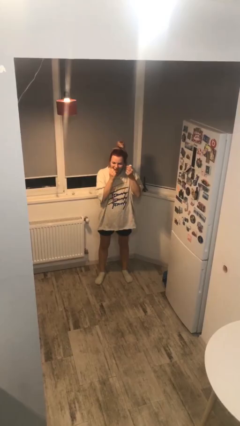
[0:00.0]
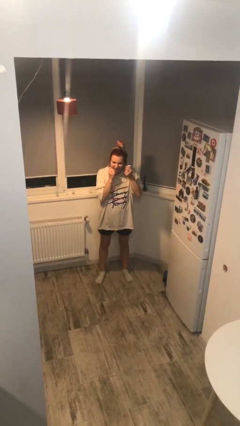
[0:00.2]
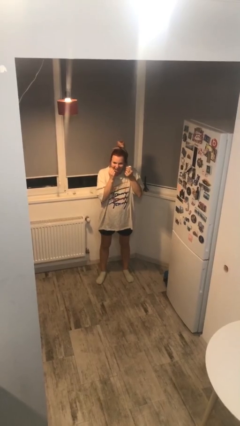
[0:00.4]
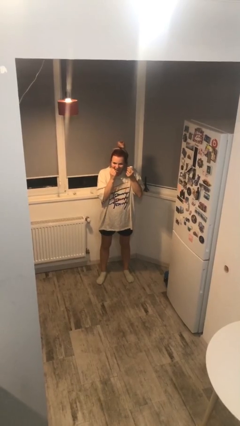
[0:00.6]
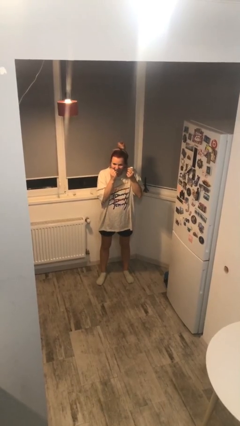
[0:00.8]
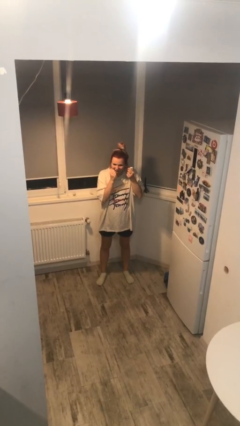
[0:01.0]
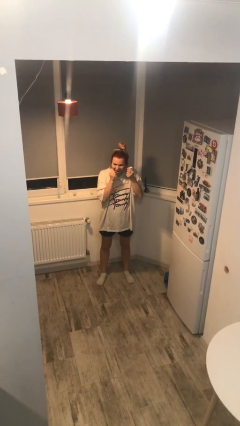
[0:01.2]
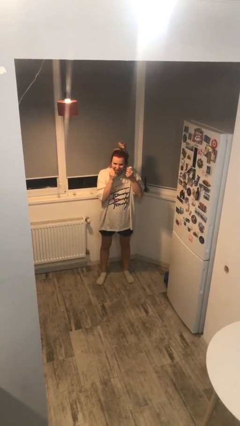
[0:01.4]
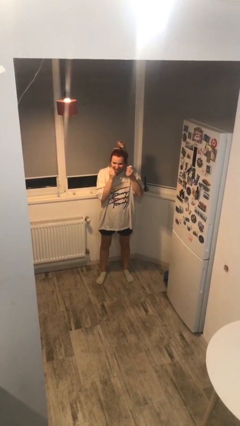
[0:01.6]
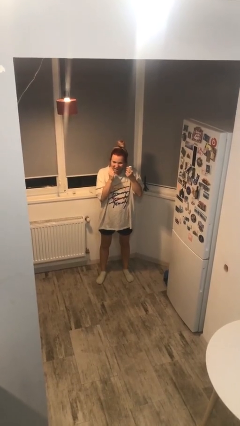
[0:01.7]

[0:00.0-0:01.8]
person flosses

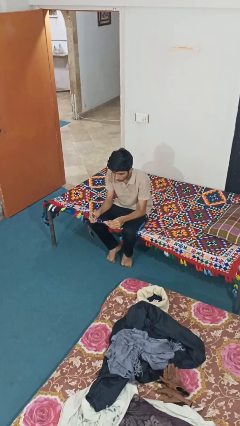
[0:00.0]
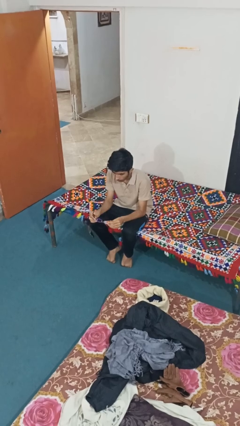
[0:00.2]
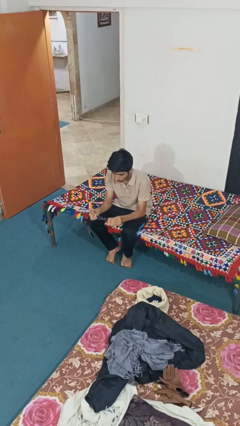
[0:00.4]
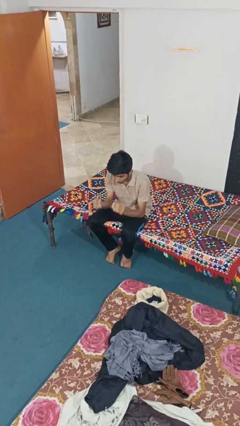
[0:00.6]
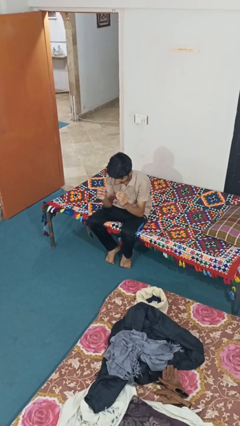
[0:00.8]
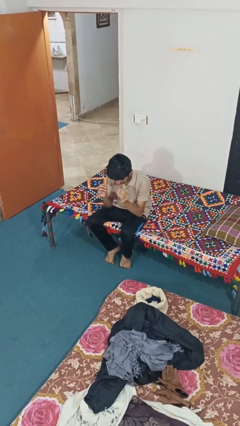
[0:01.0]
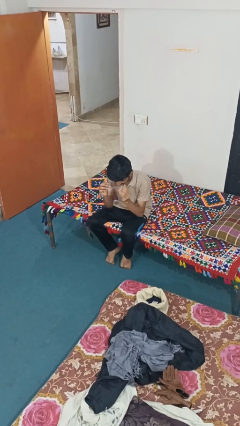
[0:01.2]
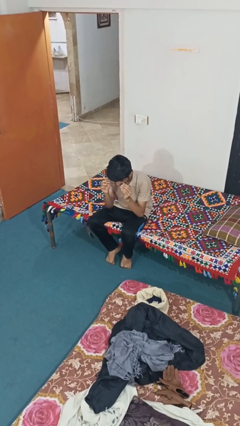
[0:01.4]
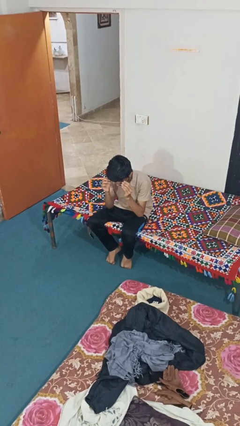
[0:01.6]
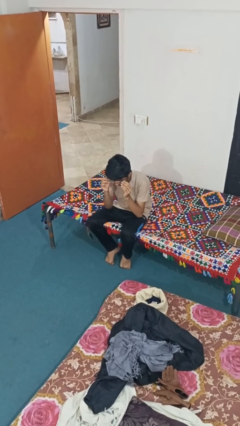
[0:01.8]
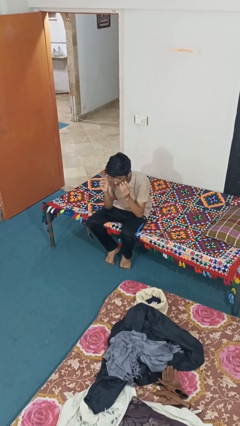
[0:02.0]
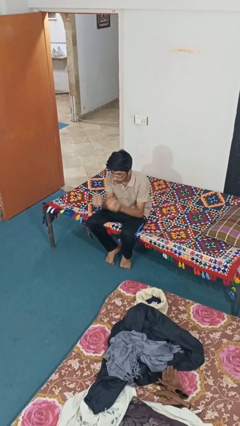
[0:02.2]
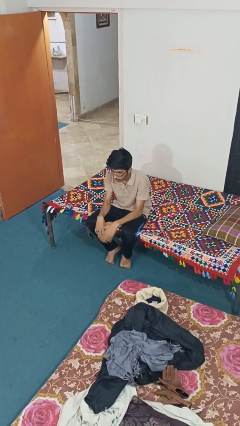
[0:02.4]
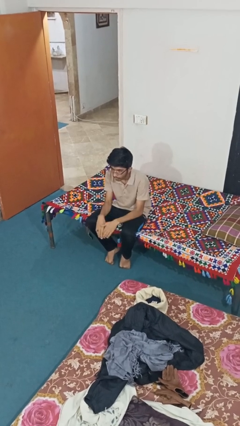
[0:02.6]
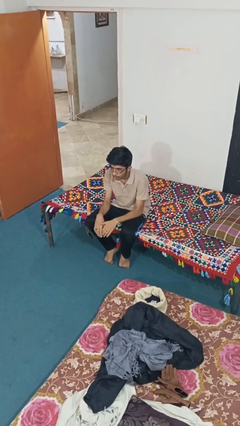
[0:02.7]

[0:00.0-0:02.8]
person puts on glasses

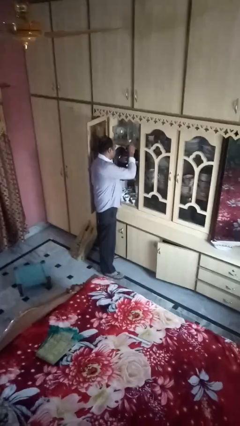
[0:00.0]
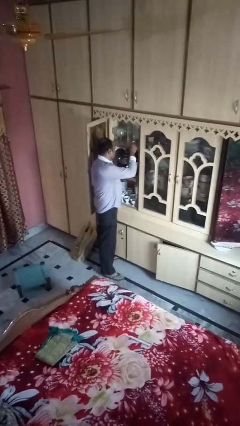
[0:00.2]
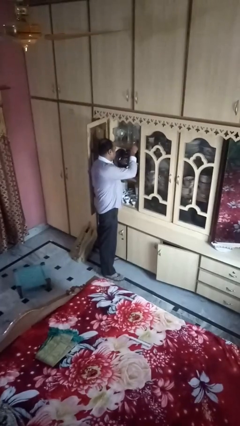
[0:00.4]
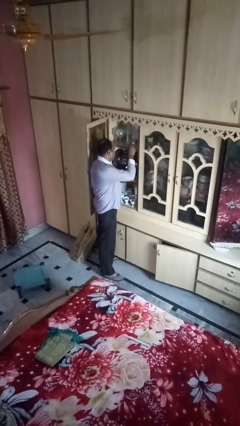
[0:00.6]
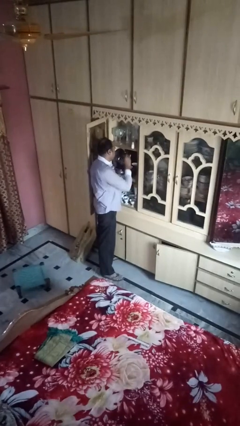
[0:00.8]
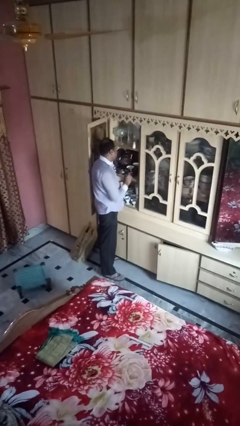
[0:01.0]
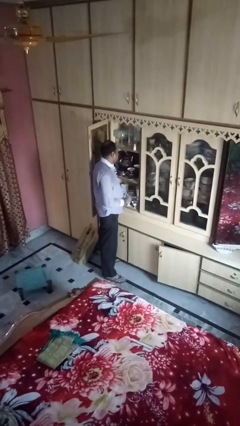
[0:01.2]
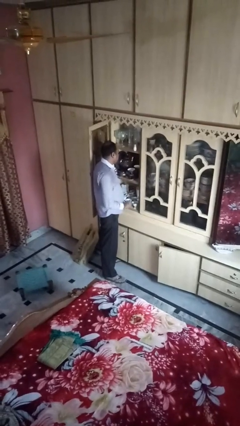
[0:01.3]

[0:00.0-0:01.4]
person puts down object on shelf

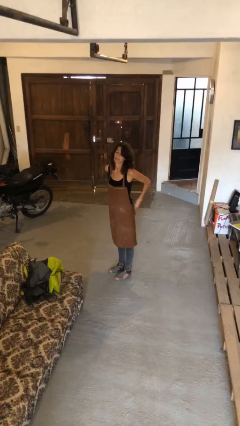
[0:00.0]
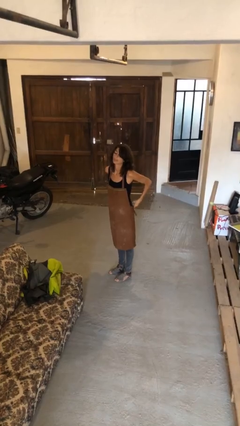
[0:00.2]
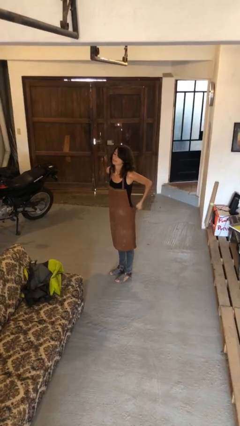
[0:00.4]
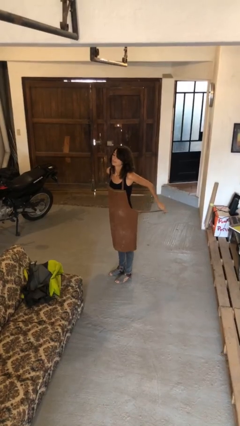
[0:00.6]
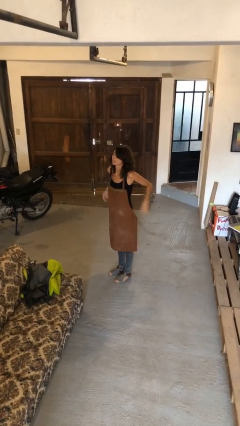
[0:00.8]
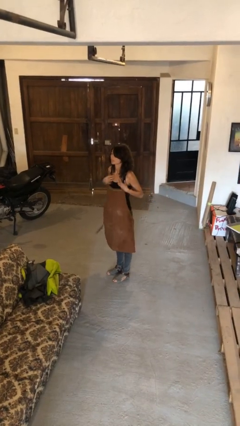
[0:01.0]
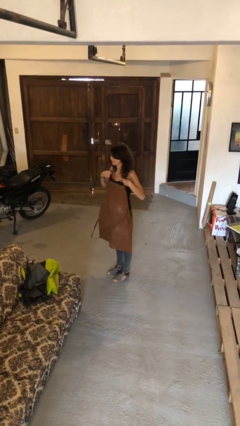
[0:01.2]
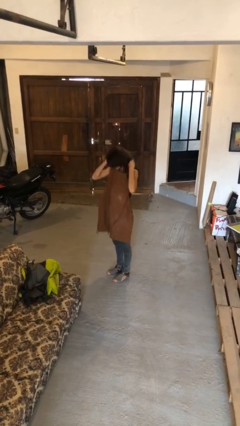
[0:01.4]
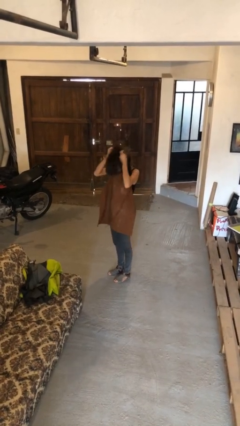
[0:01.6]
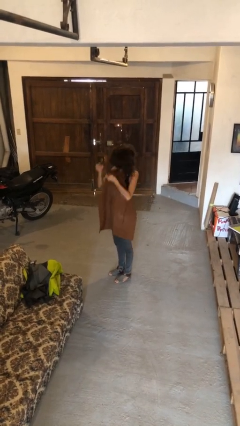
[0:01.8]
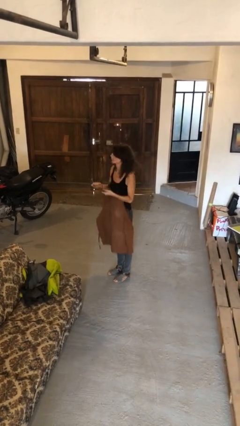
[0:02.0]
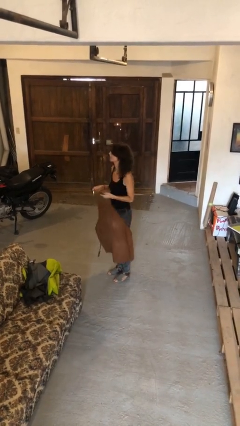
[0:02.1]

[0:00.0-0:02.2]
person takes off apron

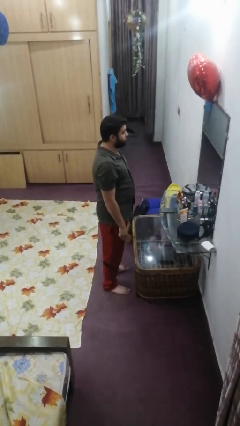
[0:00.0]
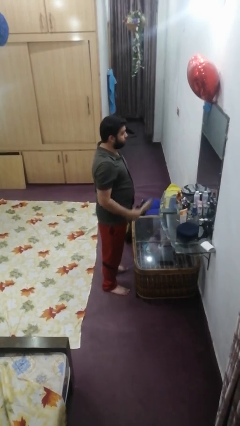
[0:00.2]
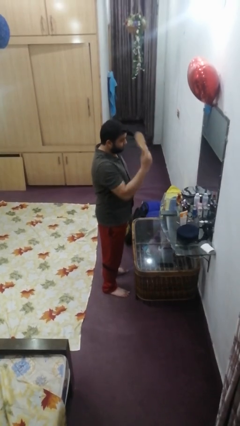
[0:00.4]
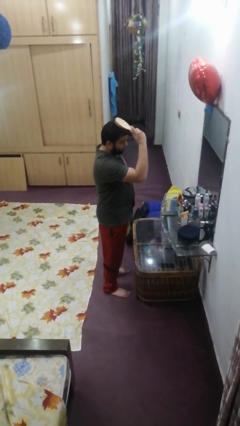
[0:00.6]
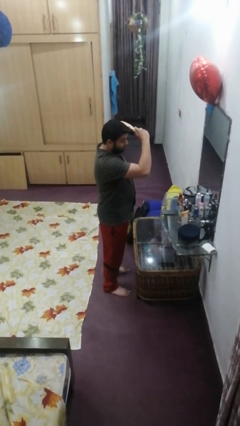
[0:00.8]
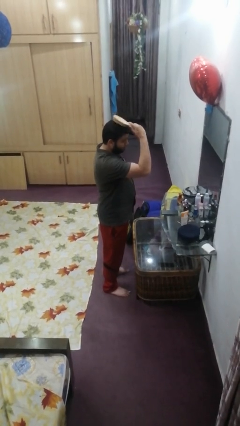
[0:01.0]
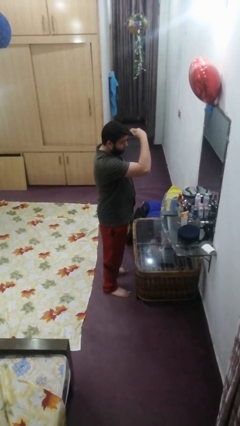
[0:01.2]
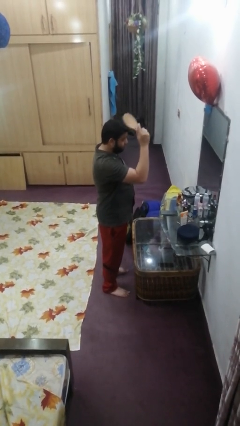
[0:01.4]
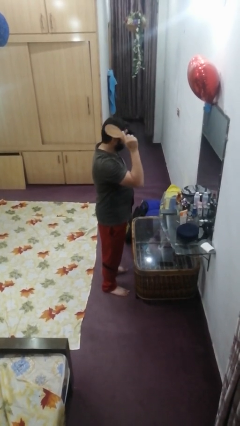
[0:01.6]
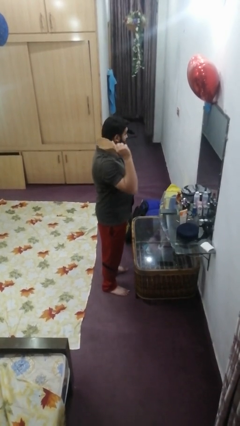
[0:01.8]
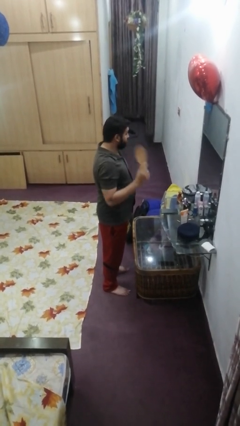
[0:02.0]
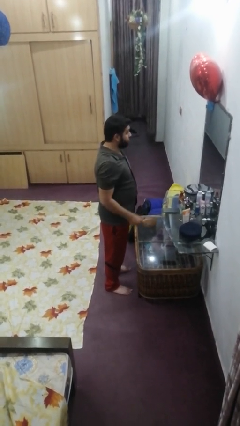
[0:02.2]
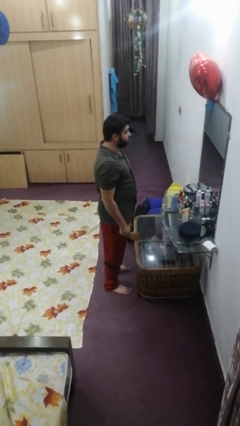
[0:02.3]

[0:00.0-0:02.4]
person brushes hair

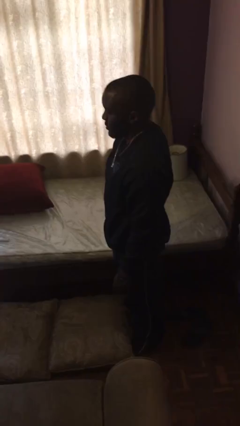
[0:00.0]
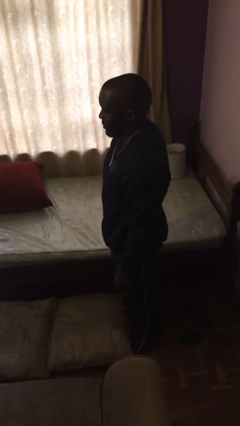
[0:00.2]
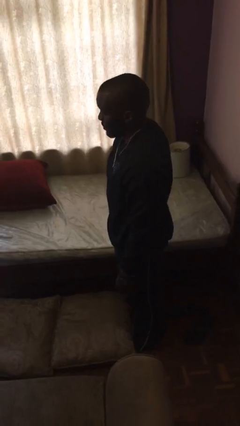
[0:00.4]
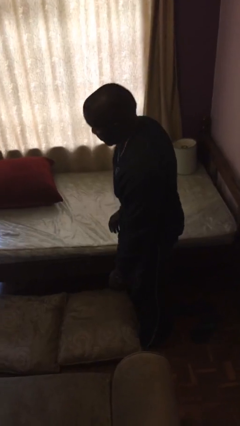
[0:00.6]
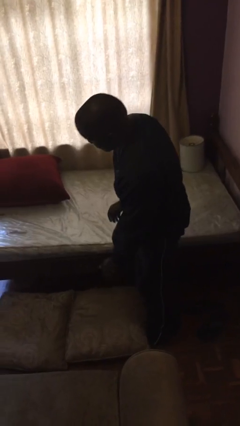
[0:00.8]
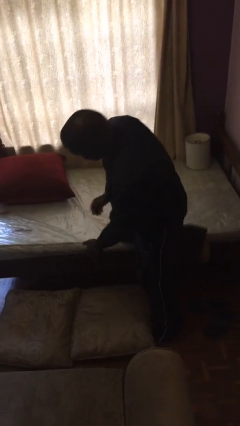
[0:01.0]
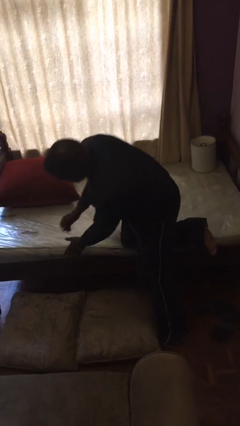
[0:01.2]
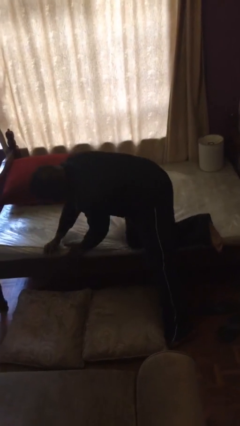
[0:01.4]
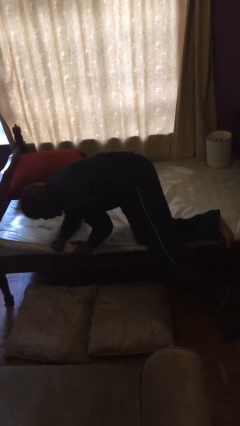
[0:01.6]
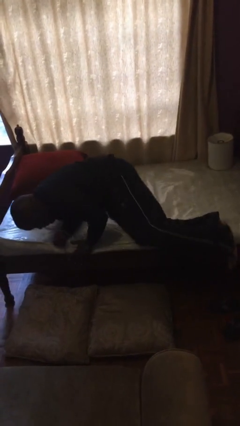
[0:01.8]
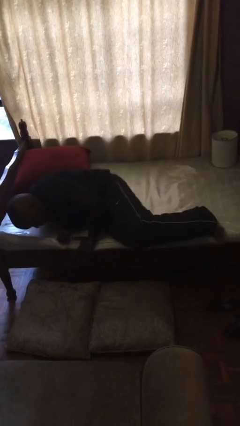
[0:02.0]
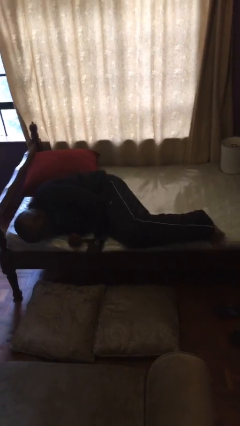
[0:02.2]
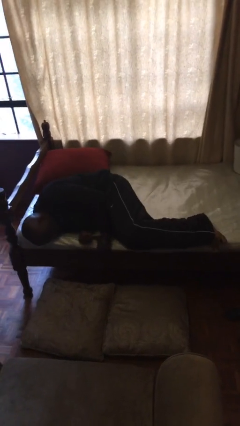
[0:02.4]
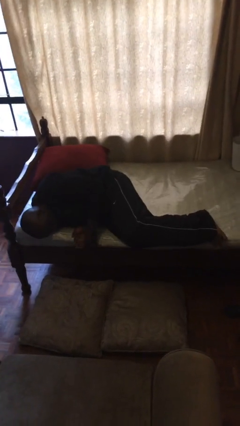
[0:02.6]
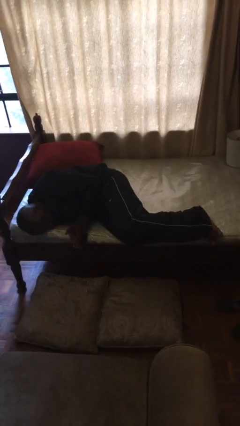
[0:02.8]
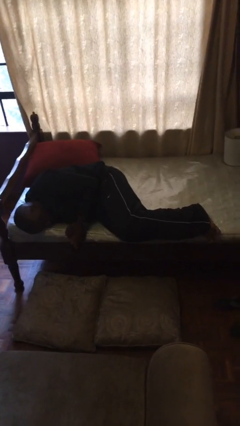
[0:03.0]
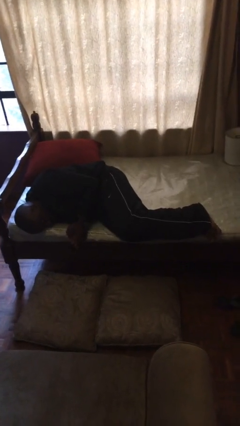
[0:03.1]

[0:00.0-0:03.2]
person lies down on bed

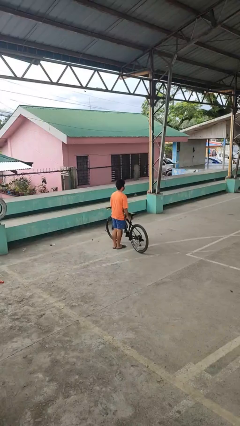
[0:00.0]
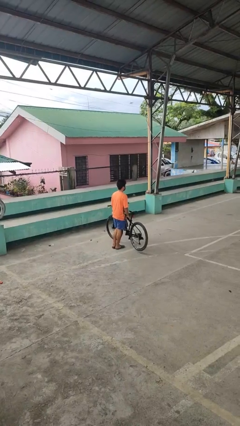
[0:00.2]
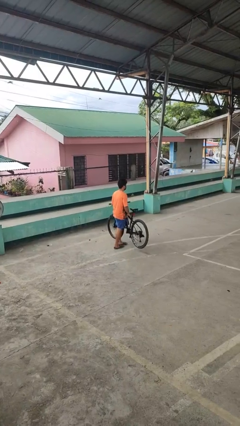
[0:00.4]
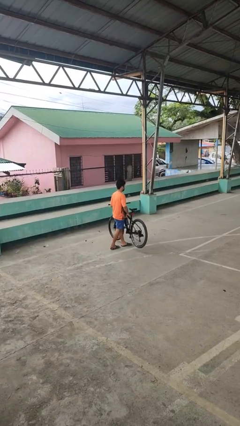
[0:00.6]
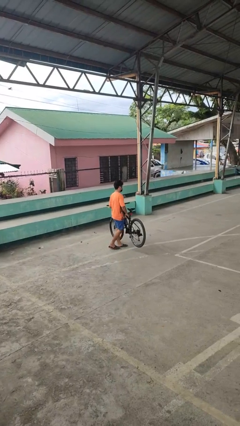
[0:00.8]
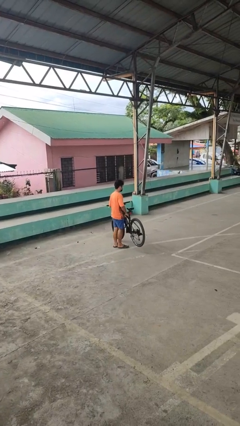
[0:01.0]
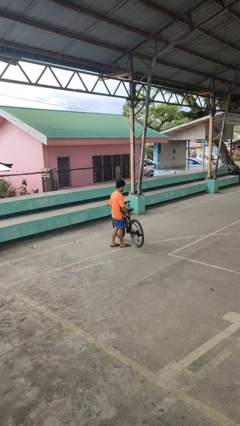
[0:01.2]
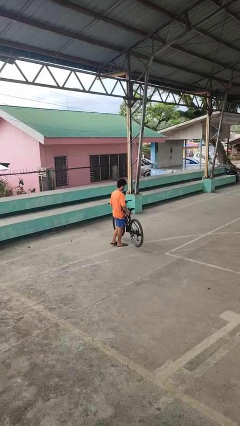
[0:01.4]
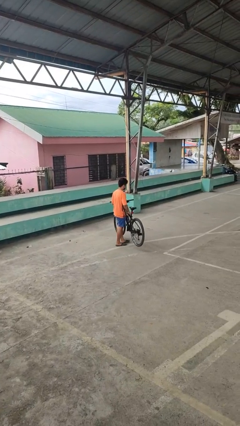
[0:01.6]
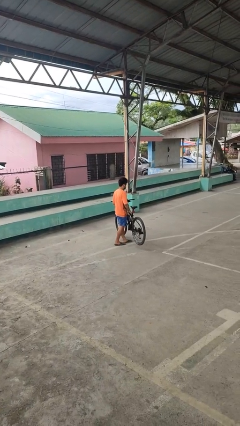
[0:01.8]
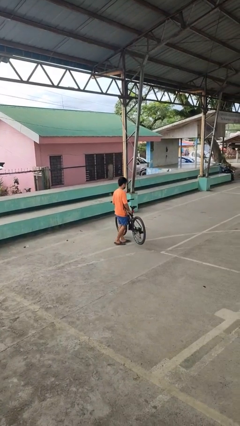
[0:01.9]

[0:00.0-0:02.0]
person carries bicycle

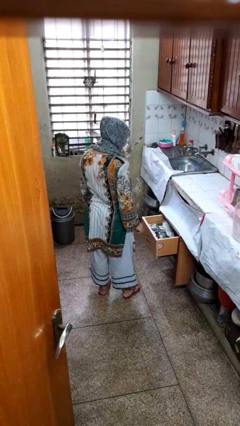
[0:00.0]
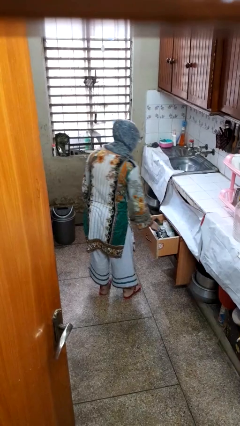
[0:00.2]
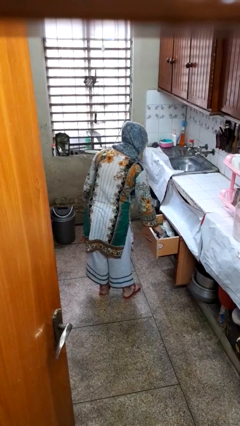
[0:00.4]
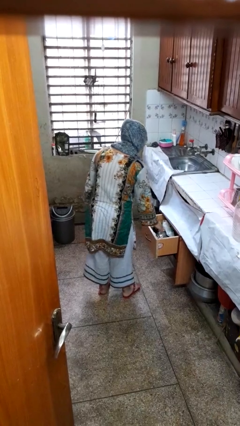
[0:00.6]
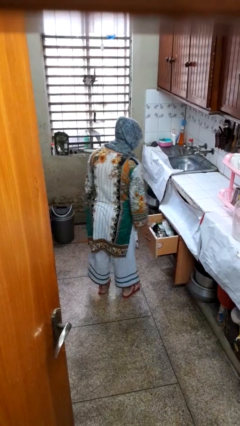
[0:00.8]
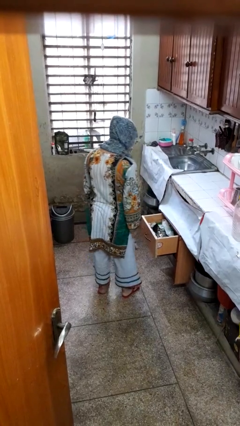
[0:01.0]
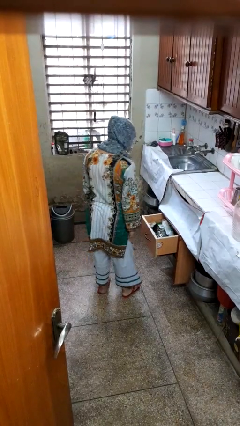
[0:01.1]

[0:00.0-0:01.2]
person puts object into kitchen drawer
